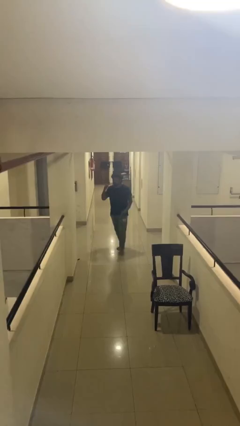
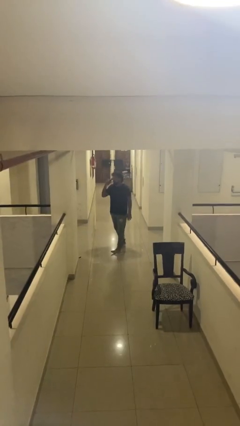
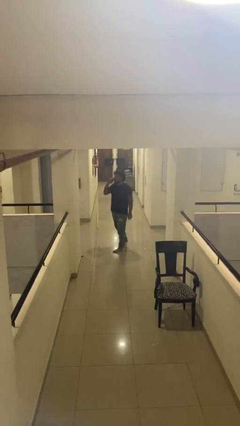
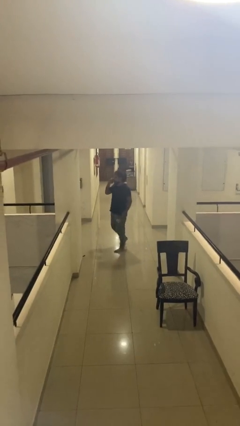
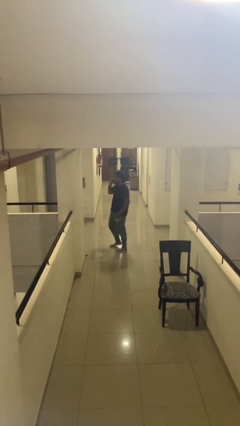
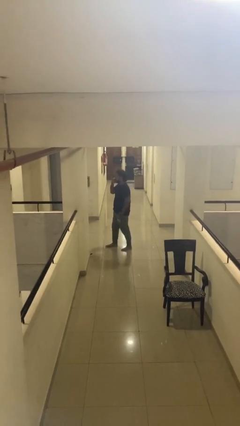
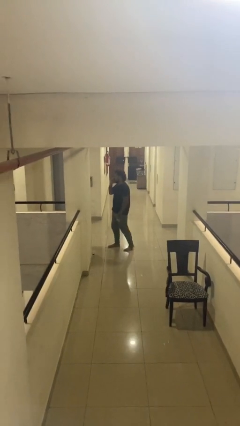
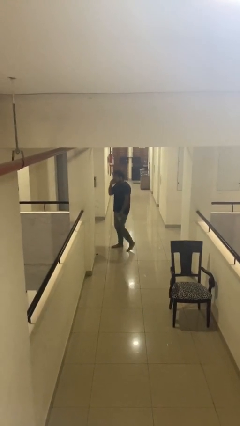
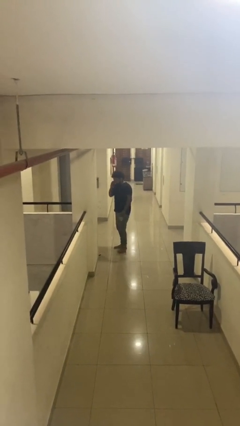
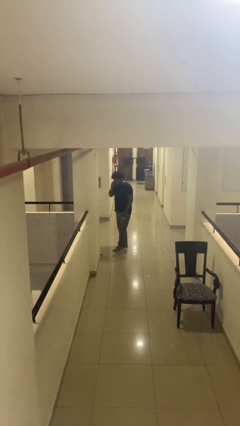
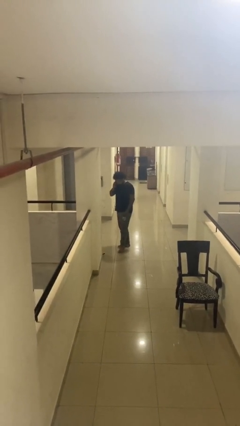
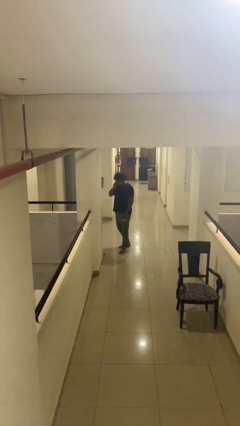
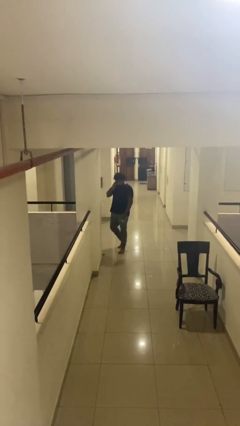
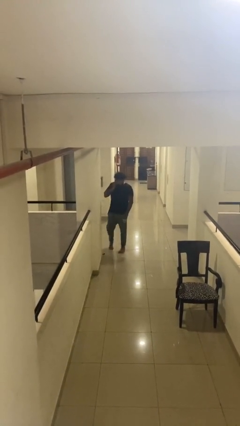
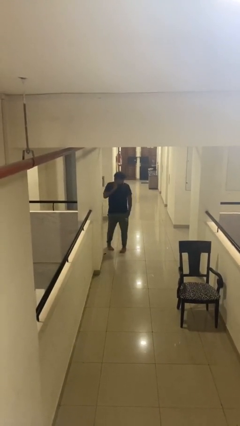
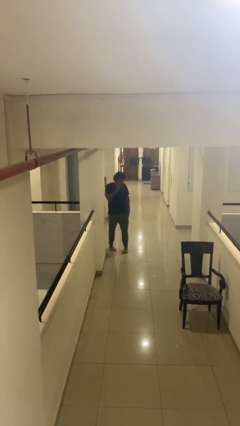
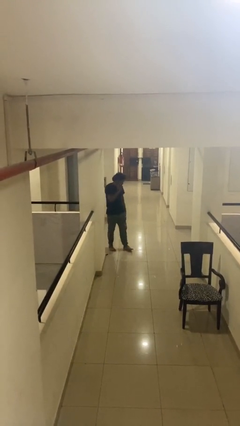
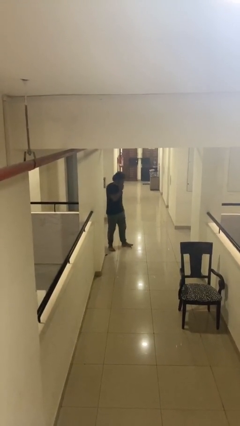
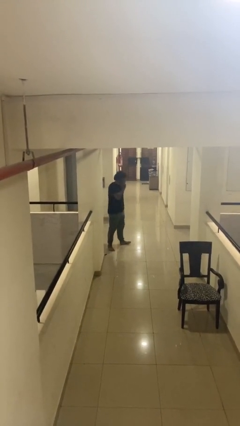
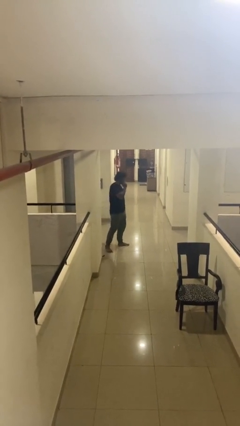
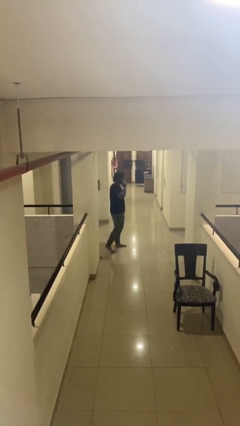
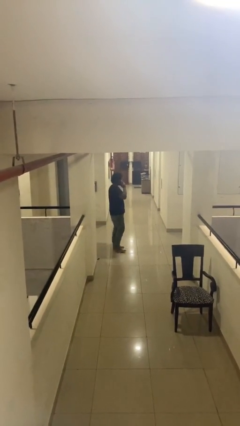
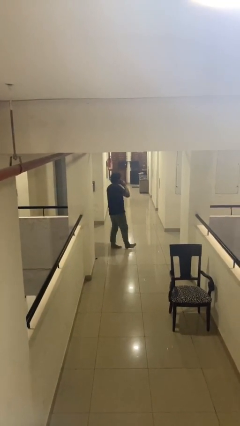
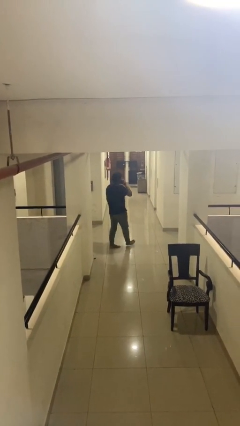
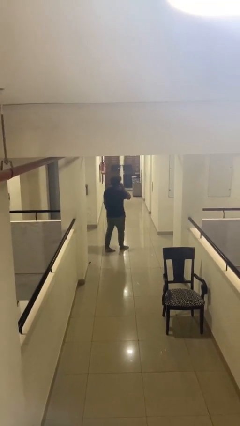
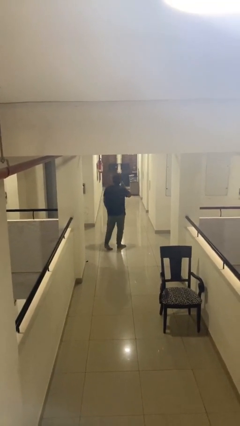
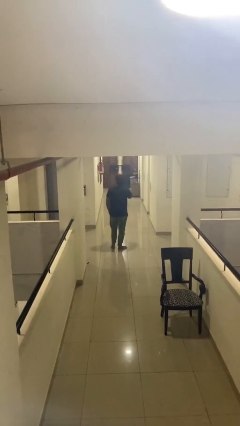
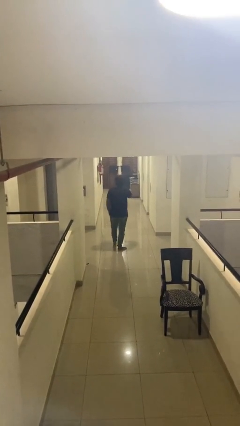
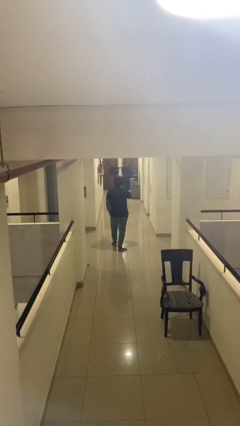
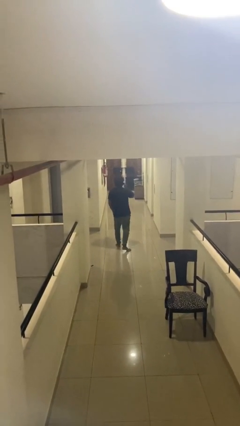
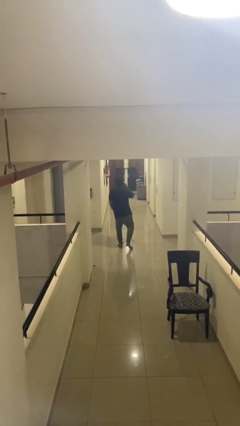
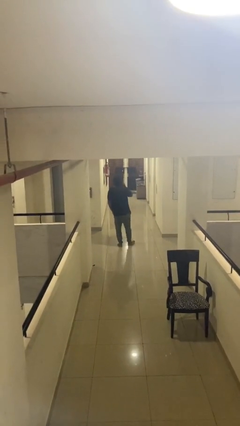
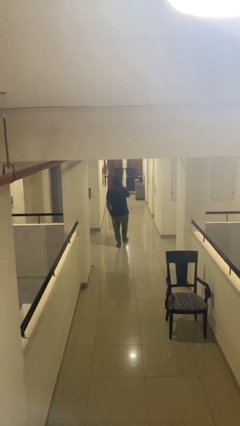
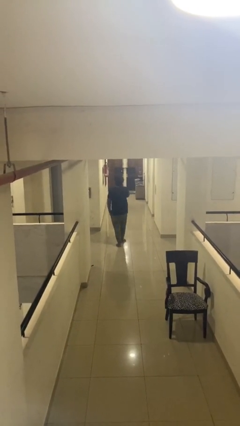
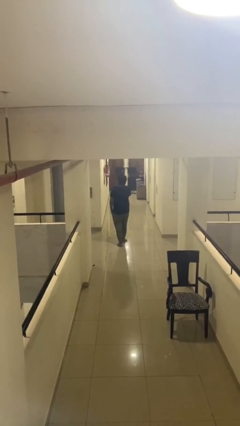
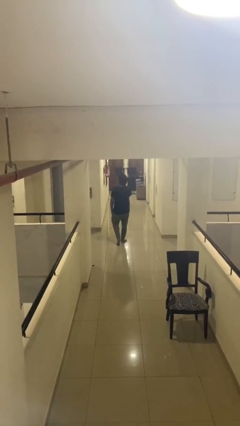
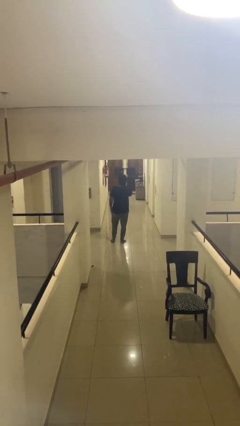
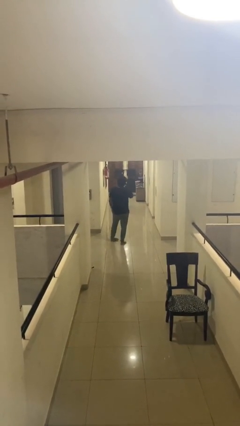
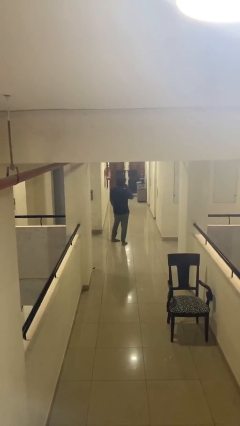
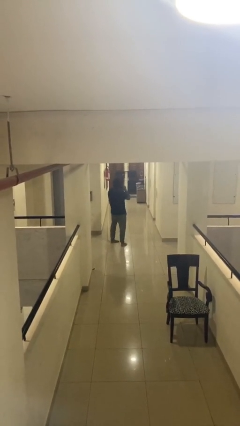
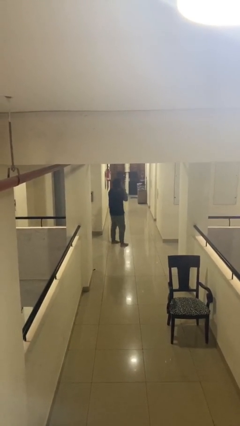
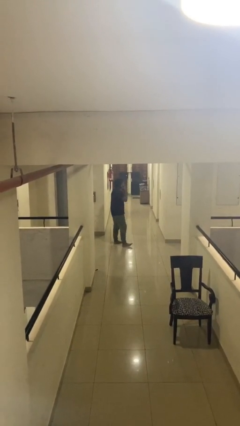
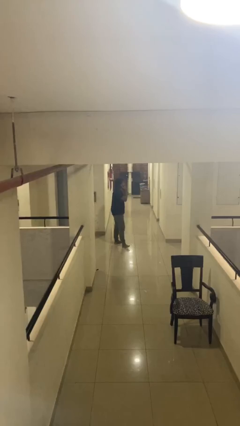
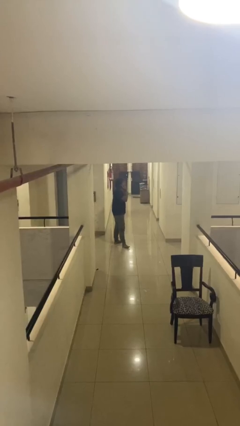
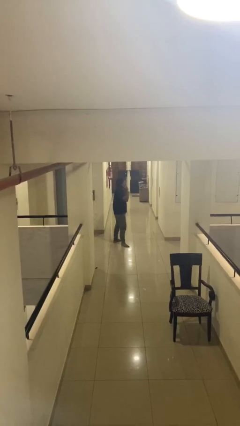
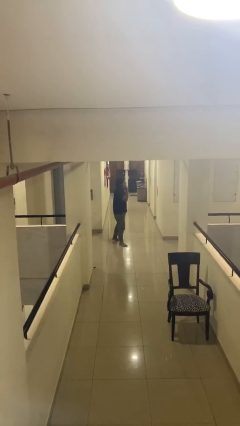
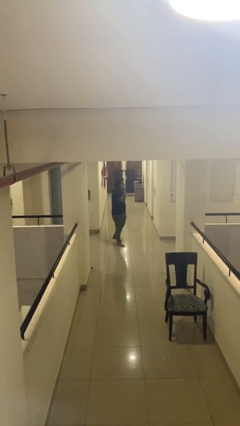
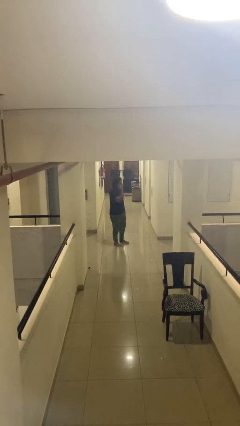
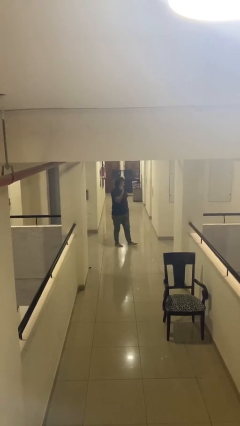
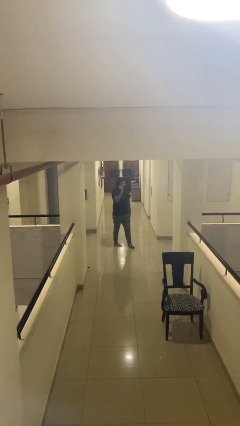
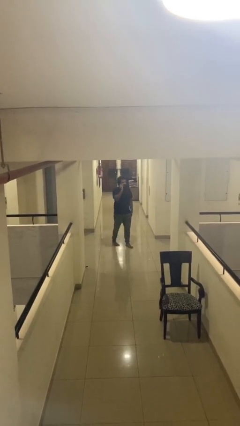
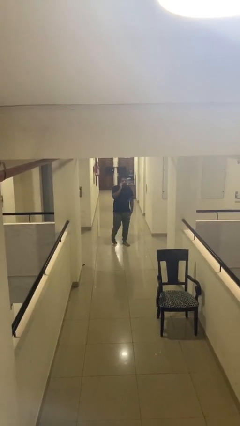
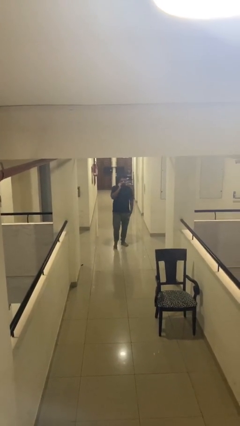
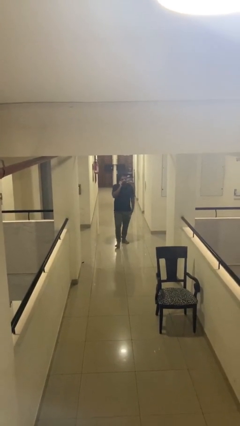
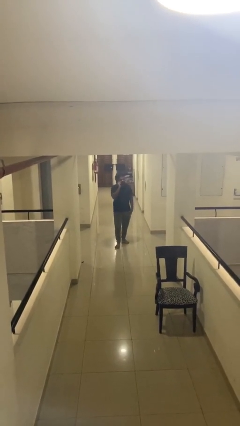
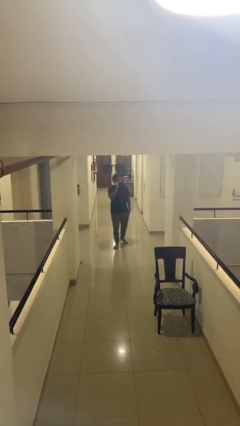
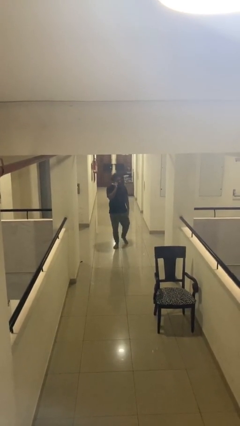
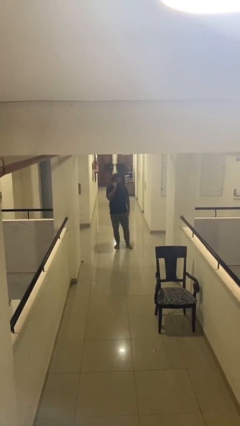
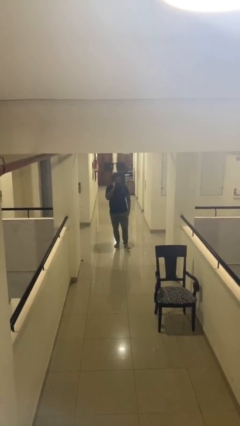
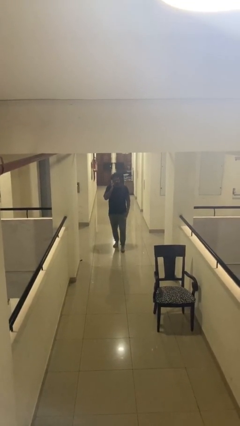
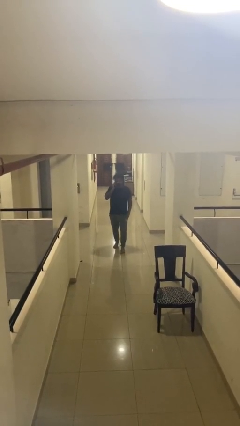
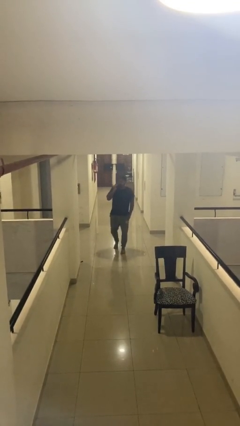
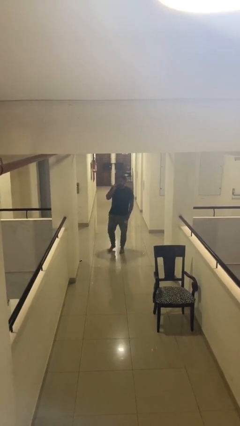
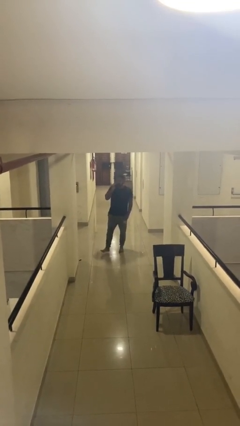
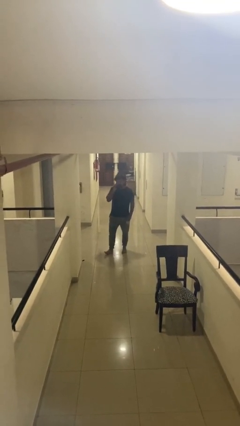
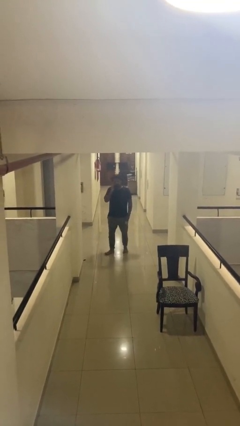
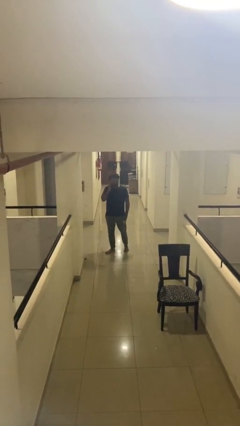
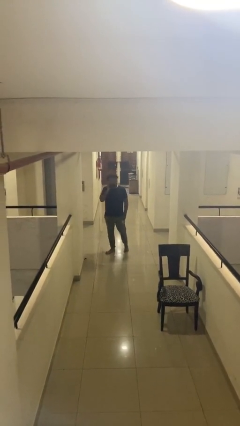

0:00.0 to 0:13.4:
person talks on phone

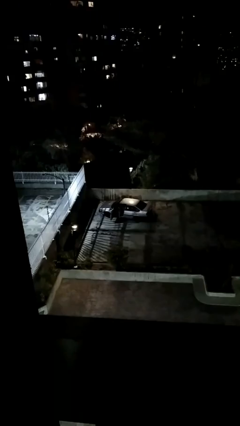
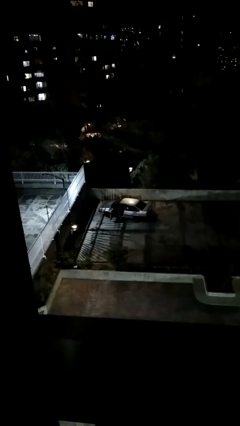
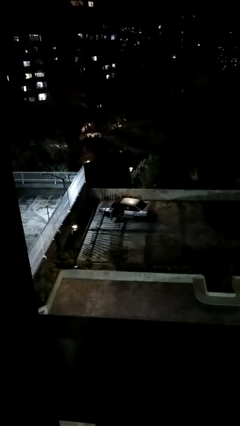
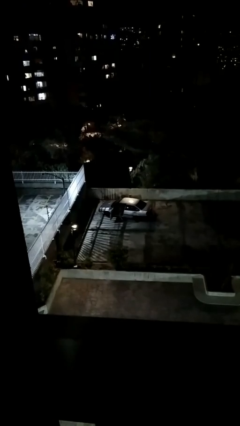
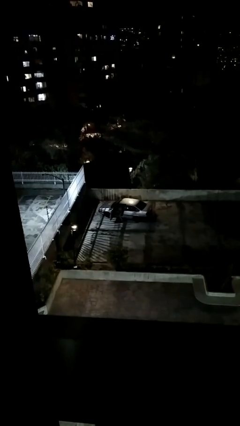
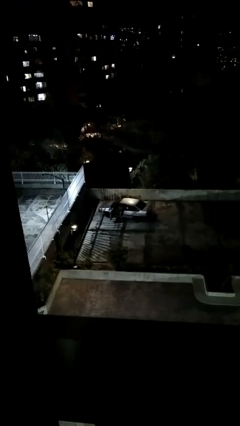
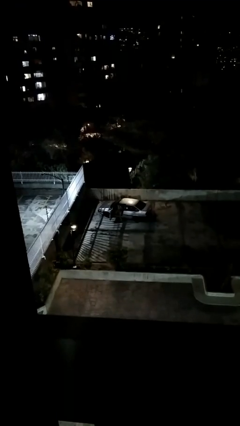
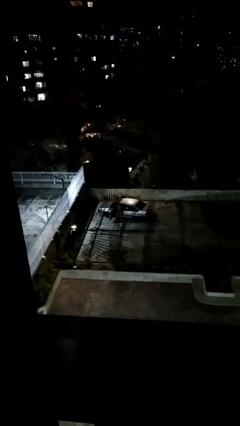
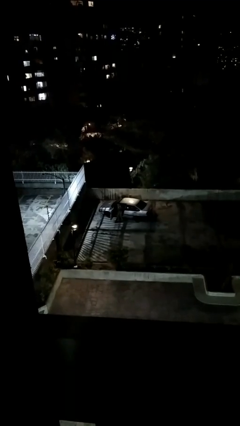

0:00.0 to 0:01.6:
person exits car

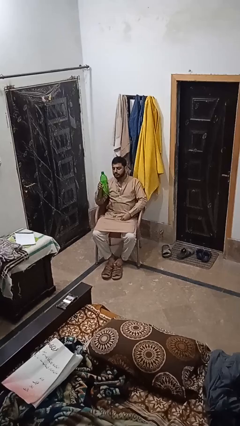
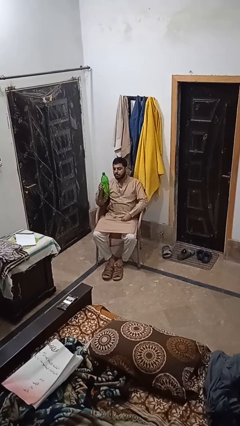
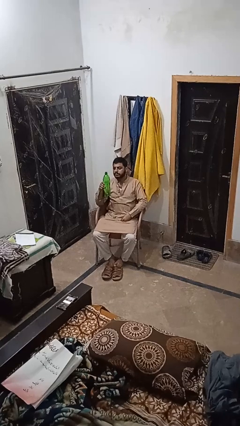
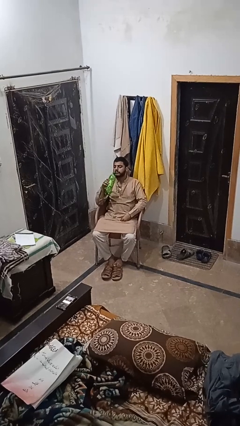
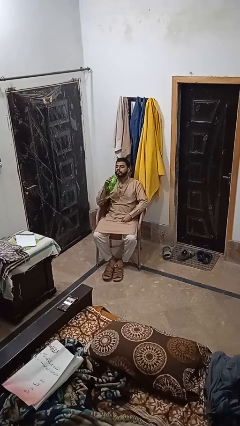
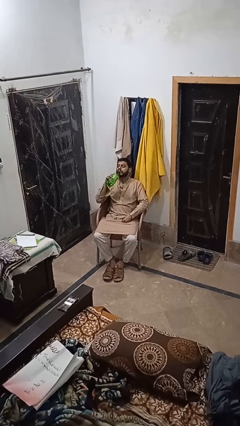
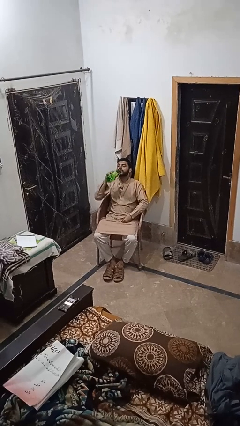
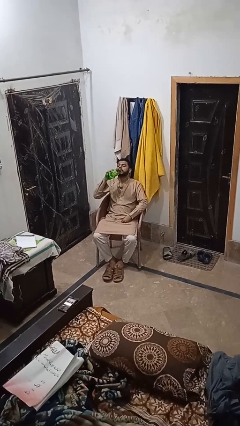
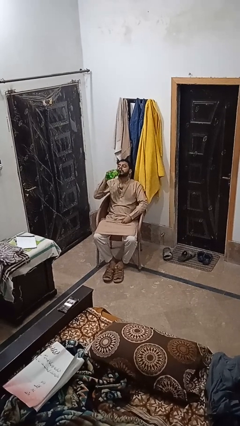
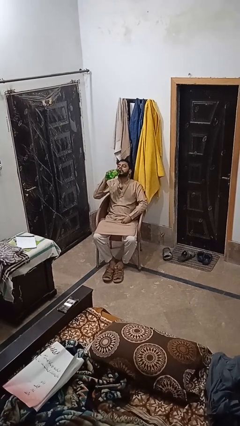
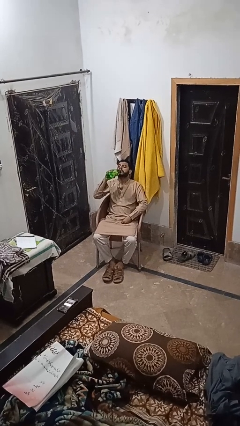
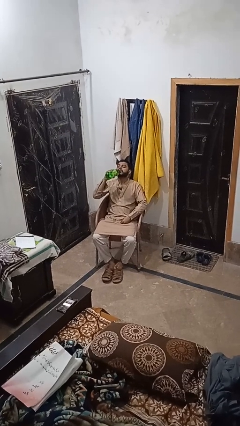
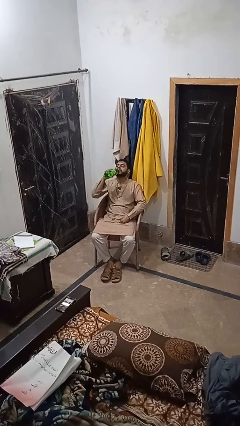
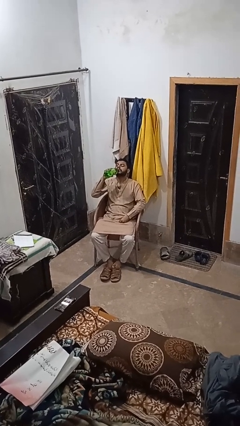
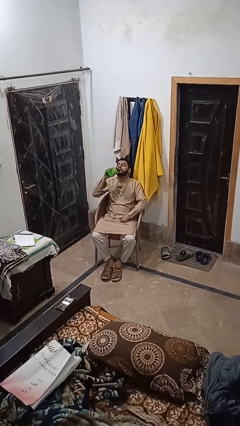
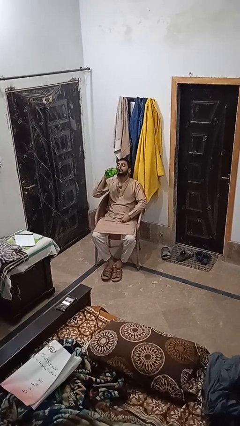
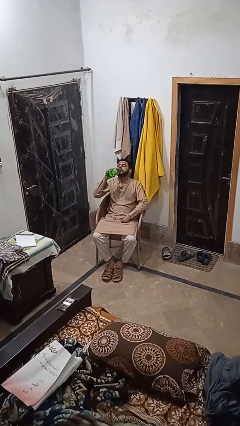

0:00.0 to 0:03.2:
person drinks from bottle
